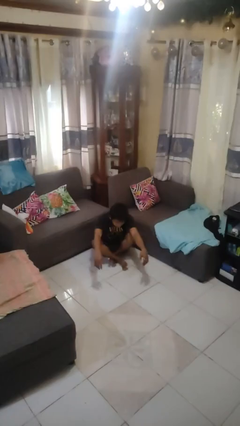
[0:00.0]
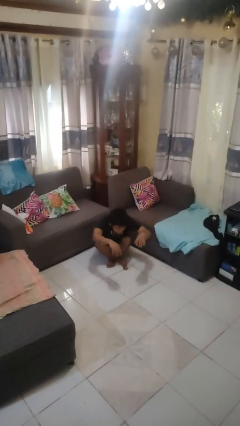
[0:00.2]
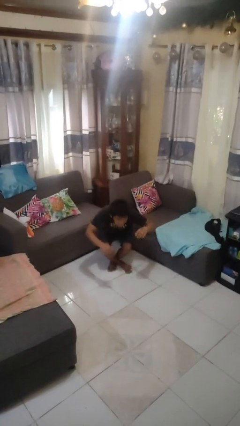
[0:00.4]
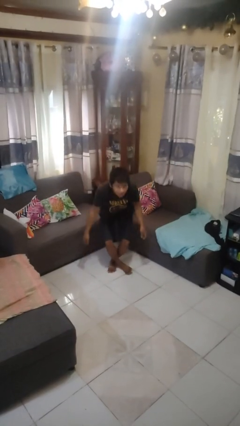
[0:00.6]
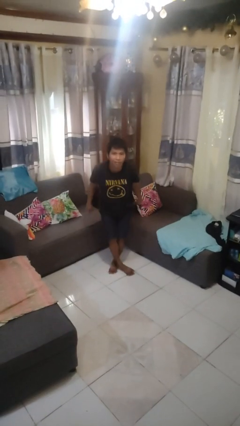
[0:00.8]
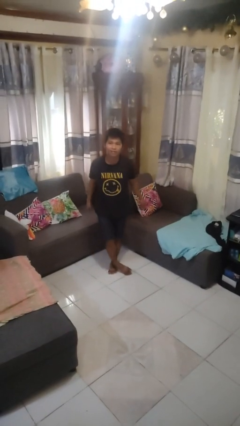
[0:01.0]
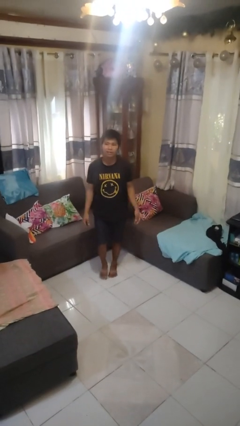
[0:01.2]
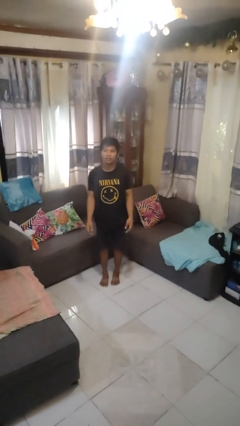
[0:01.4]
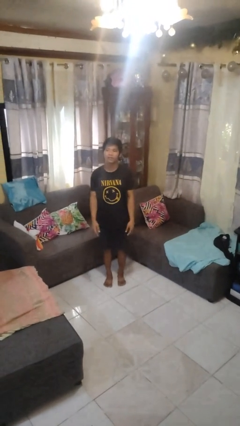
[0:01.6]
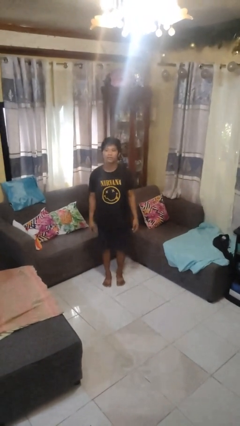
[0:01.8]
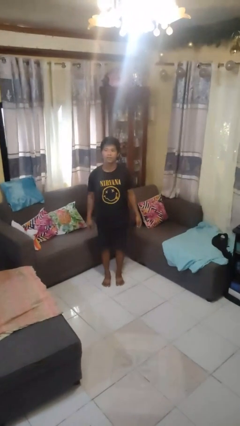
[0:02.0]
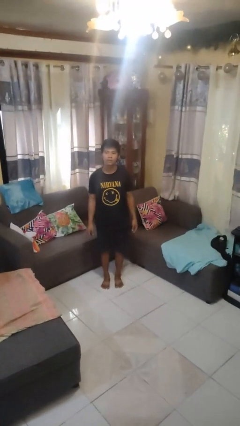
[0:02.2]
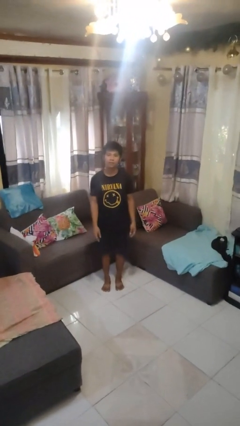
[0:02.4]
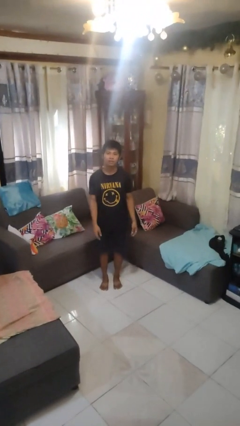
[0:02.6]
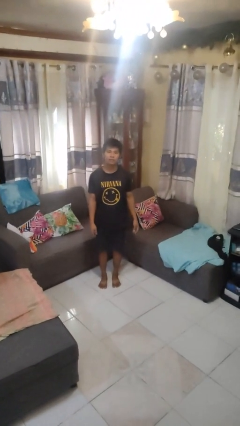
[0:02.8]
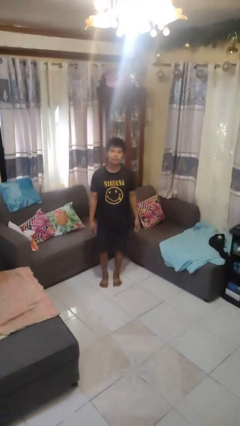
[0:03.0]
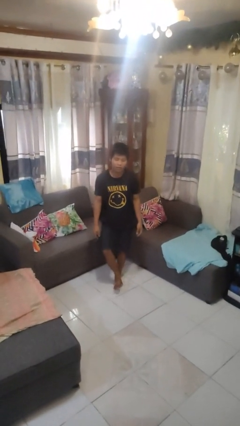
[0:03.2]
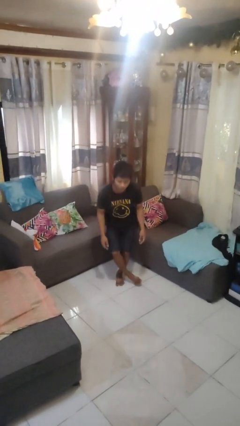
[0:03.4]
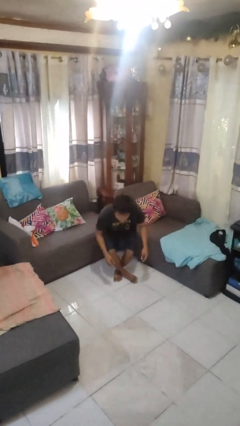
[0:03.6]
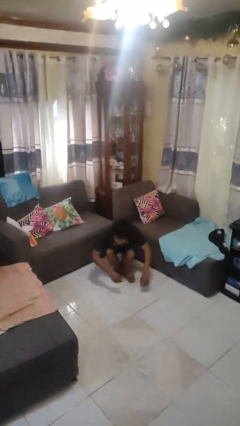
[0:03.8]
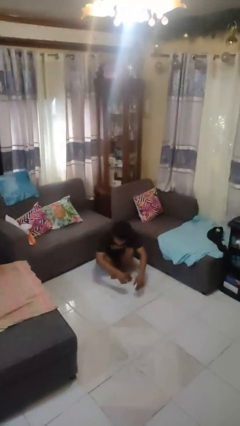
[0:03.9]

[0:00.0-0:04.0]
person stands up from floor

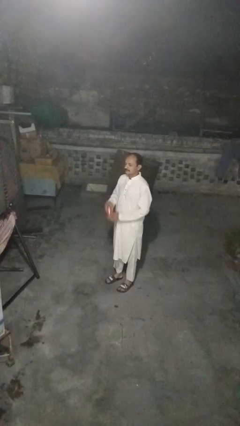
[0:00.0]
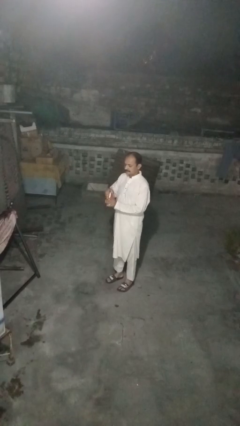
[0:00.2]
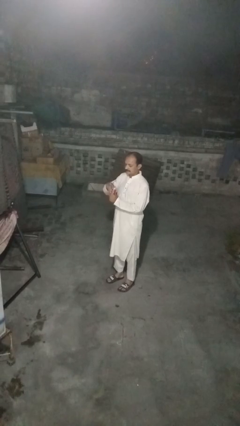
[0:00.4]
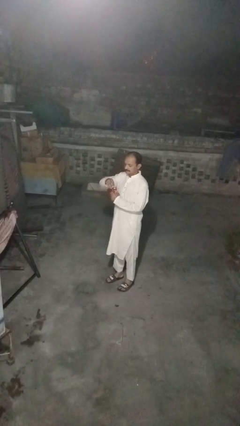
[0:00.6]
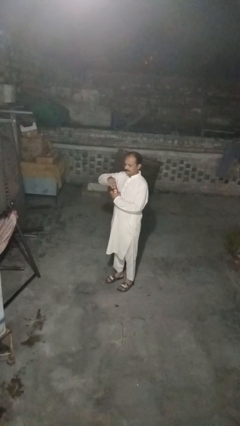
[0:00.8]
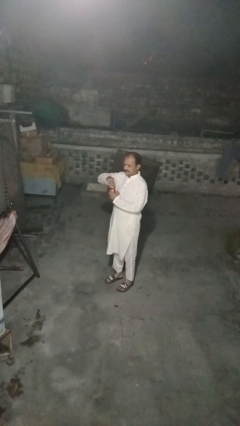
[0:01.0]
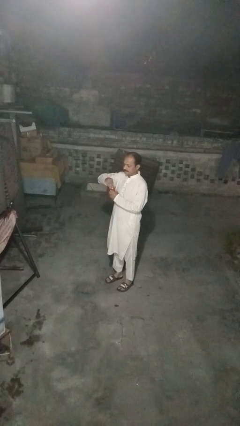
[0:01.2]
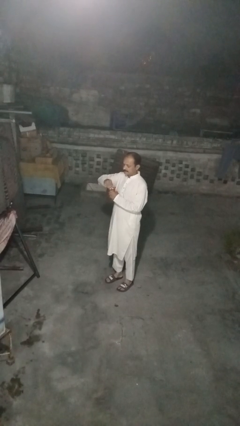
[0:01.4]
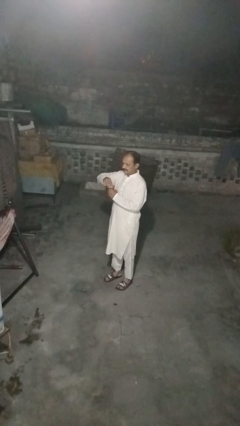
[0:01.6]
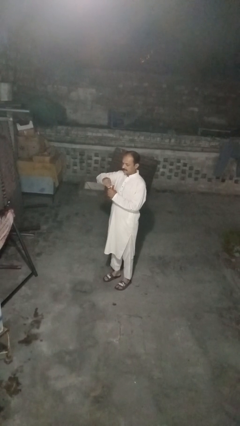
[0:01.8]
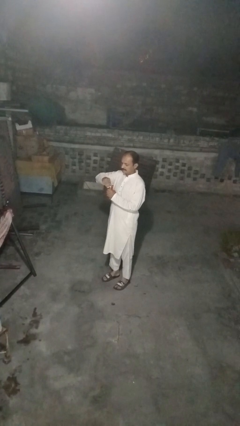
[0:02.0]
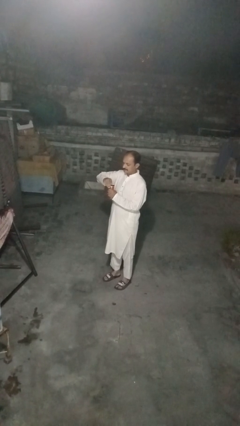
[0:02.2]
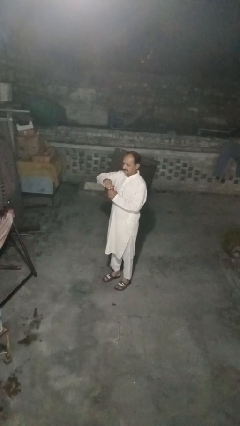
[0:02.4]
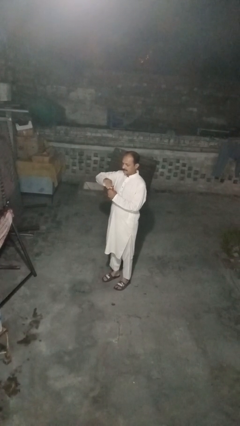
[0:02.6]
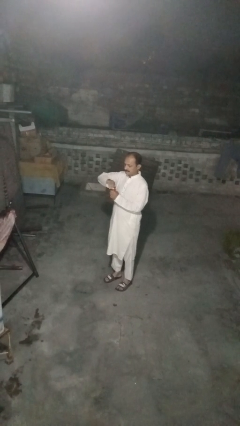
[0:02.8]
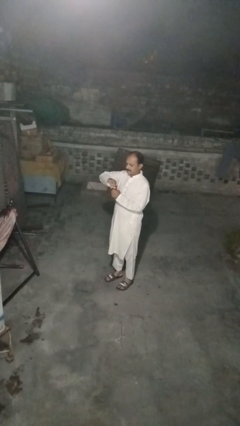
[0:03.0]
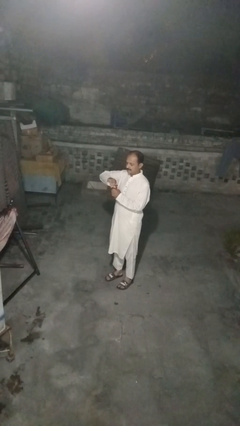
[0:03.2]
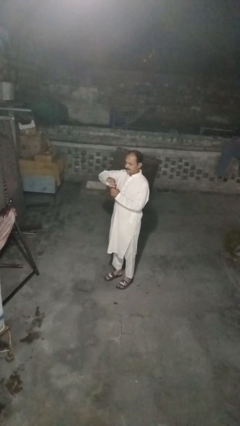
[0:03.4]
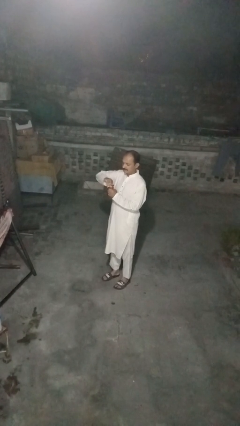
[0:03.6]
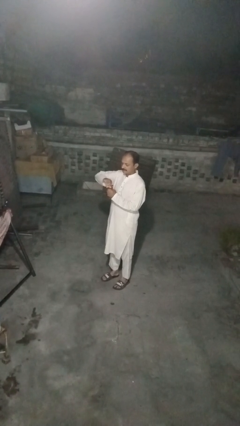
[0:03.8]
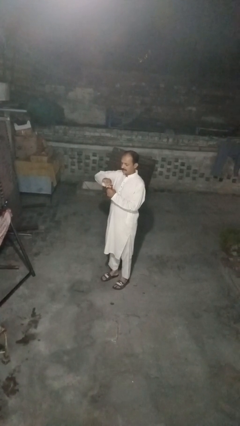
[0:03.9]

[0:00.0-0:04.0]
person opens beverage can

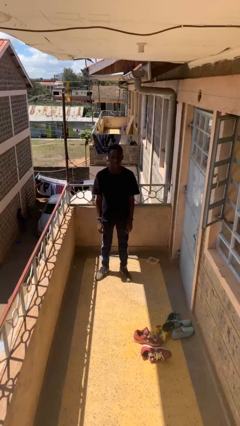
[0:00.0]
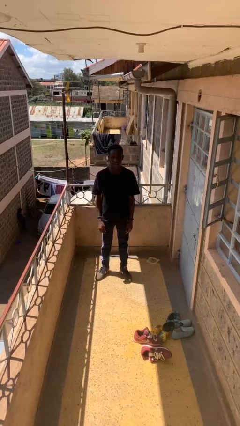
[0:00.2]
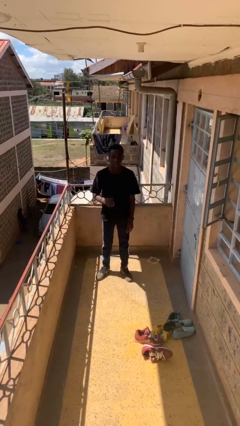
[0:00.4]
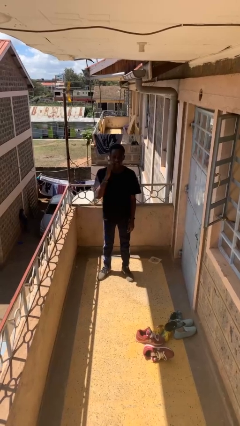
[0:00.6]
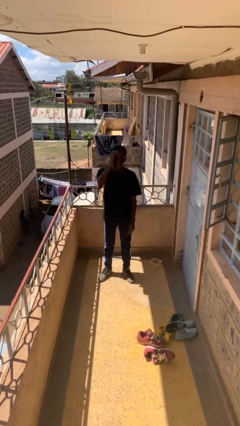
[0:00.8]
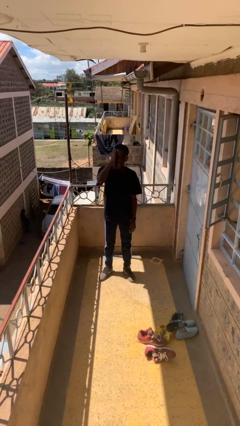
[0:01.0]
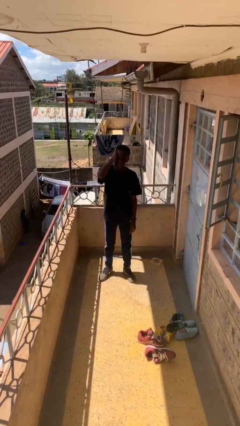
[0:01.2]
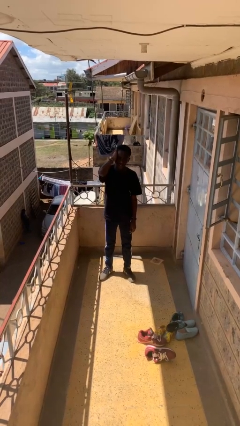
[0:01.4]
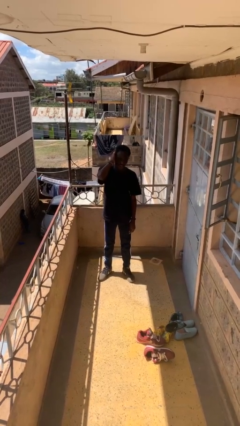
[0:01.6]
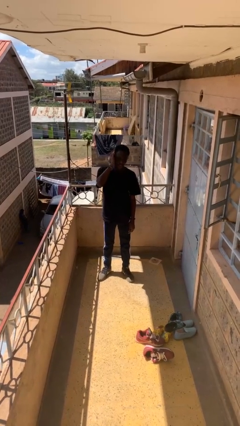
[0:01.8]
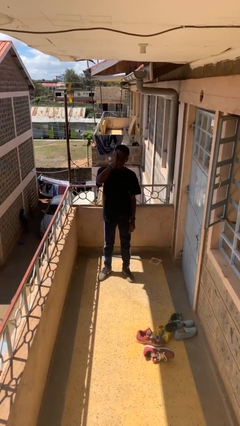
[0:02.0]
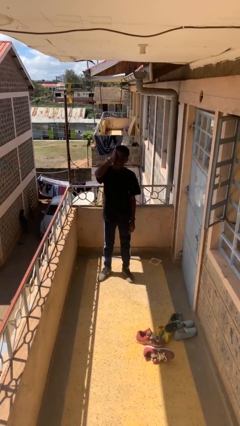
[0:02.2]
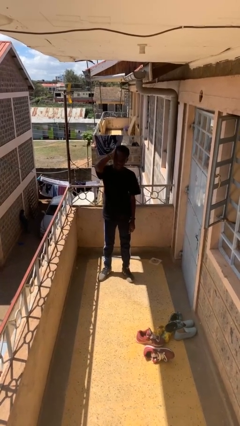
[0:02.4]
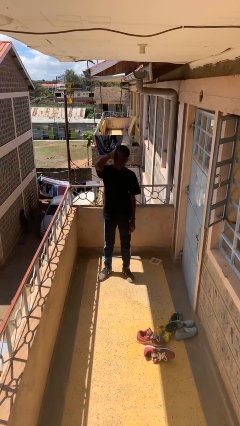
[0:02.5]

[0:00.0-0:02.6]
person strokes hair

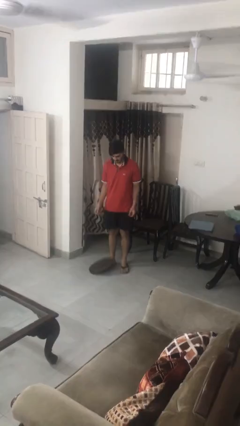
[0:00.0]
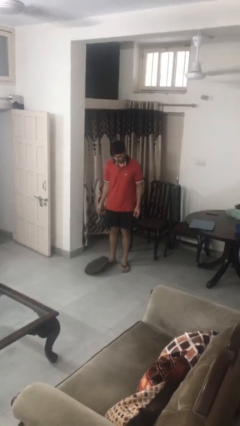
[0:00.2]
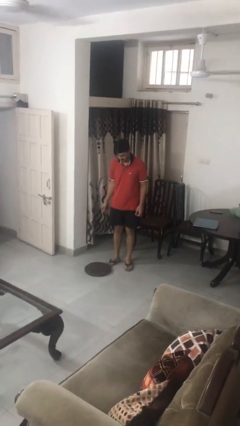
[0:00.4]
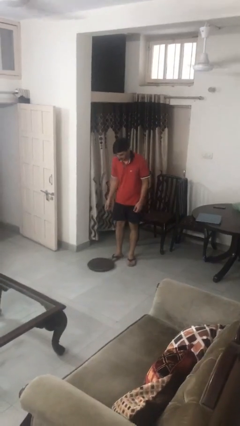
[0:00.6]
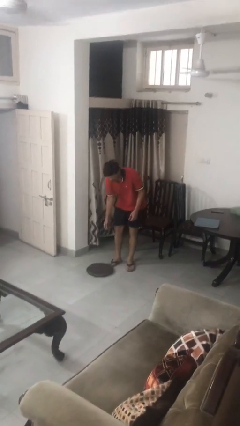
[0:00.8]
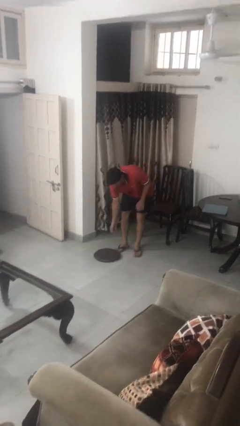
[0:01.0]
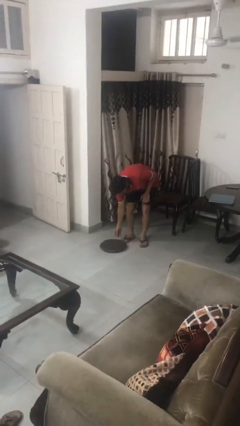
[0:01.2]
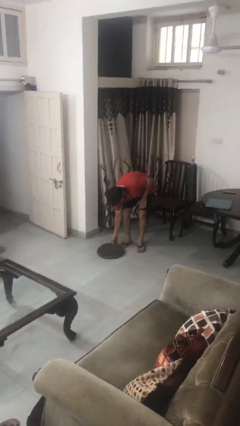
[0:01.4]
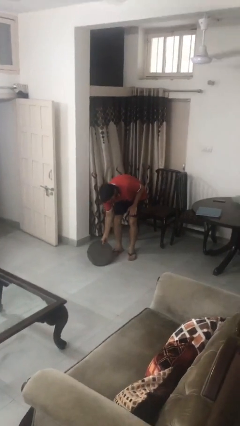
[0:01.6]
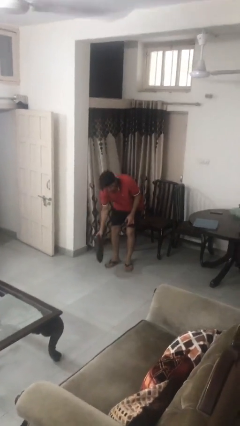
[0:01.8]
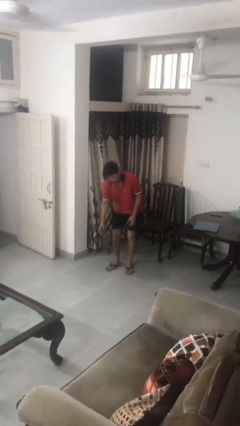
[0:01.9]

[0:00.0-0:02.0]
person picks up object from floor

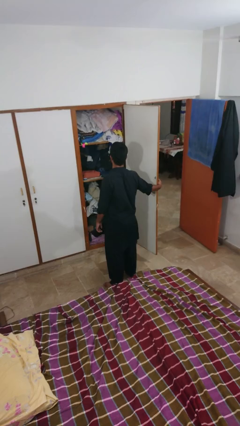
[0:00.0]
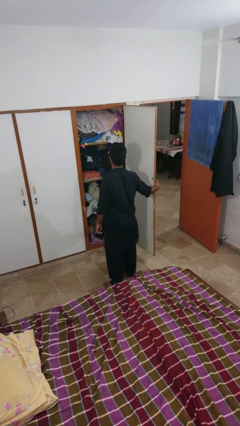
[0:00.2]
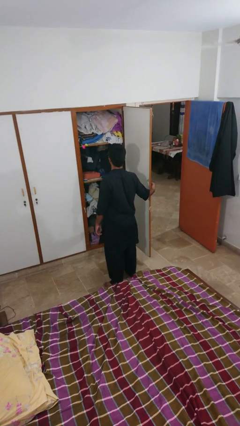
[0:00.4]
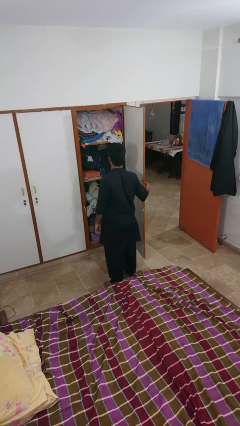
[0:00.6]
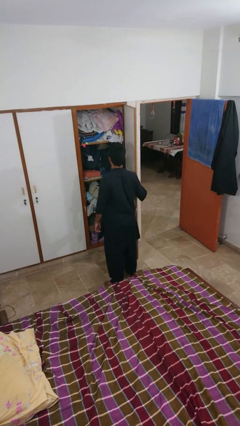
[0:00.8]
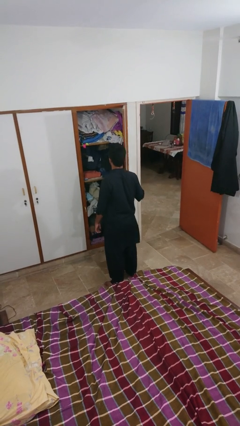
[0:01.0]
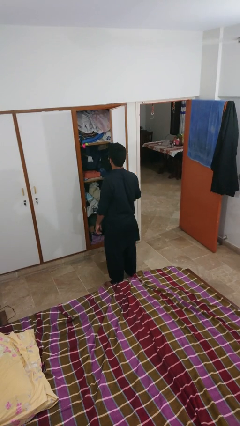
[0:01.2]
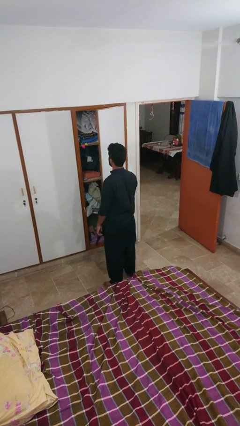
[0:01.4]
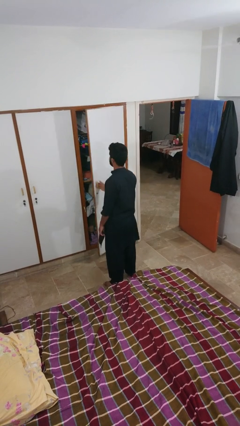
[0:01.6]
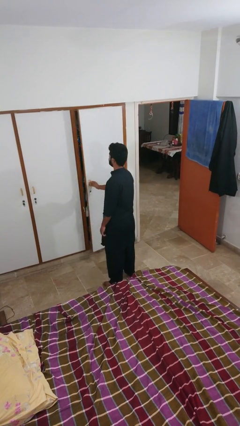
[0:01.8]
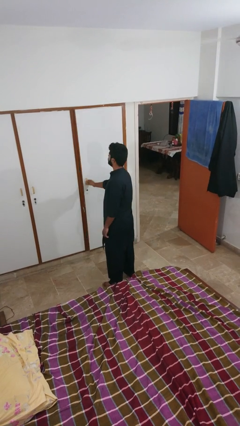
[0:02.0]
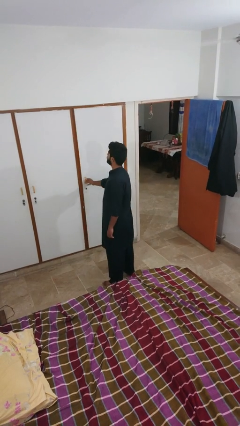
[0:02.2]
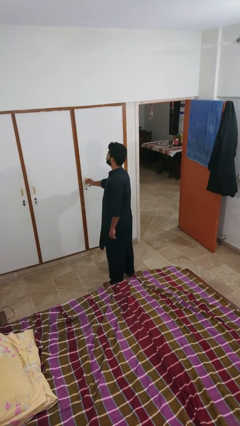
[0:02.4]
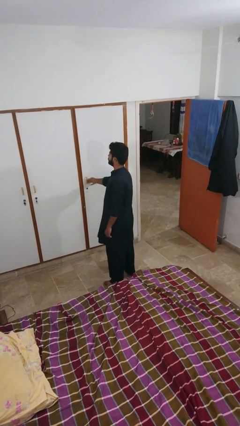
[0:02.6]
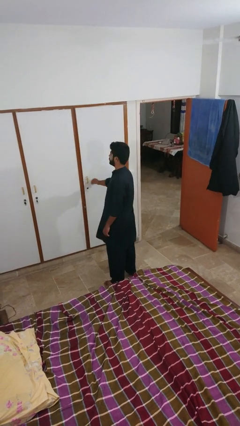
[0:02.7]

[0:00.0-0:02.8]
person closes closet door

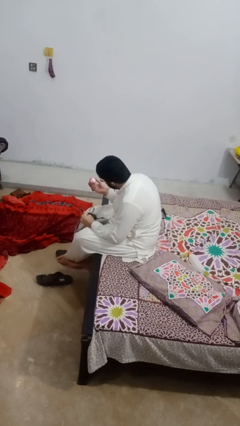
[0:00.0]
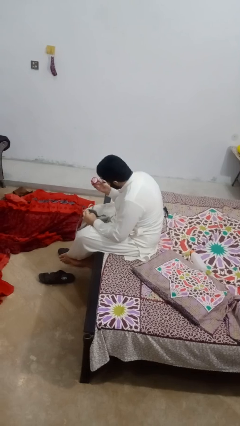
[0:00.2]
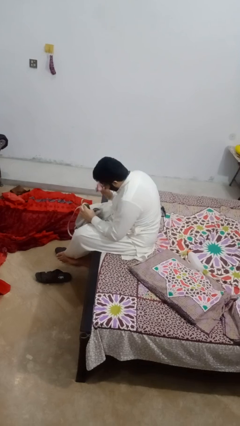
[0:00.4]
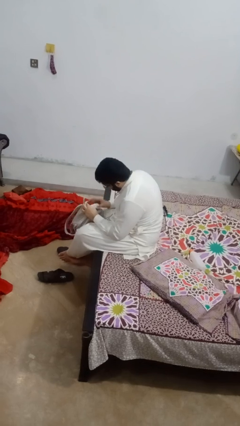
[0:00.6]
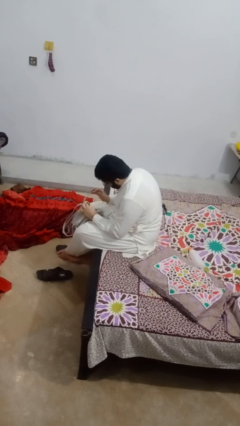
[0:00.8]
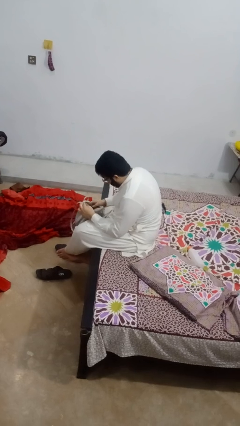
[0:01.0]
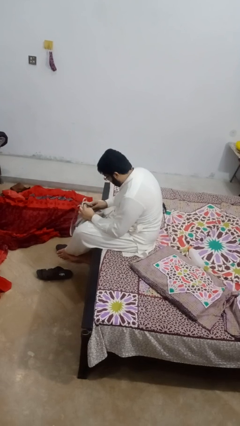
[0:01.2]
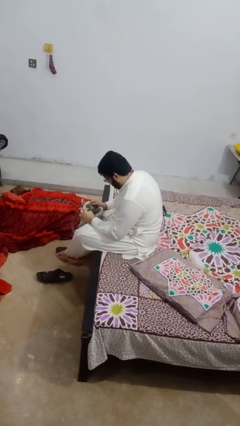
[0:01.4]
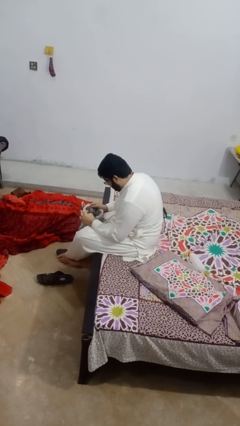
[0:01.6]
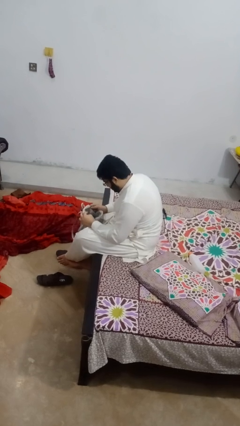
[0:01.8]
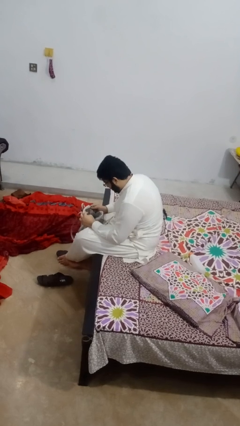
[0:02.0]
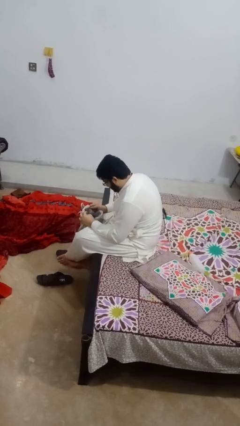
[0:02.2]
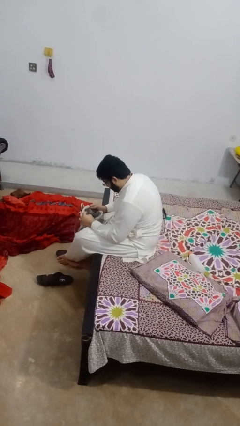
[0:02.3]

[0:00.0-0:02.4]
person puts object into purse
